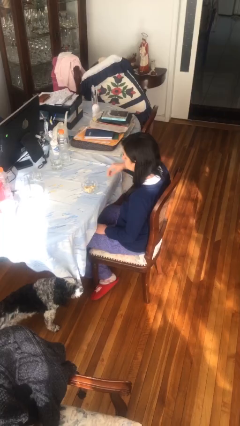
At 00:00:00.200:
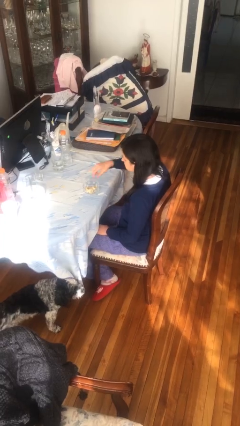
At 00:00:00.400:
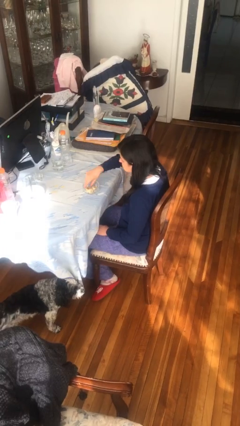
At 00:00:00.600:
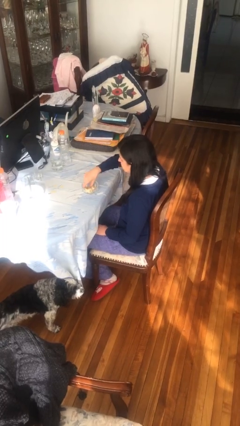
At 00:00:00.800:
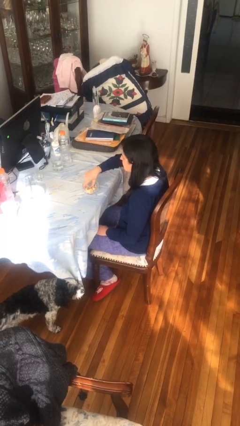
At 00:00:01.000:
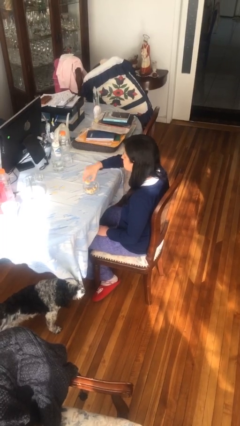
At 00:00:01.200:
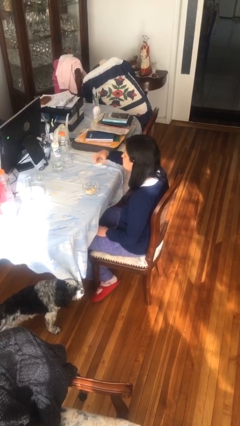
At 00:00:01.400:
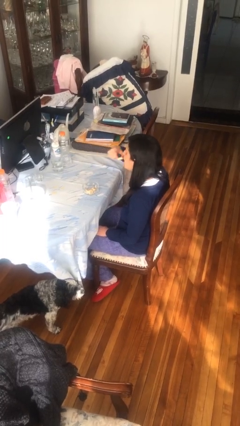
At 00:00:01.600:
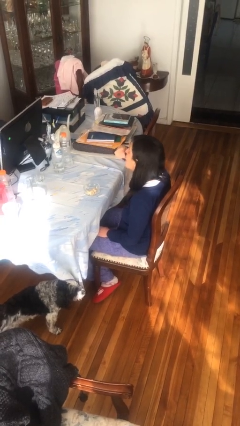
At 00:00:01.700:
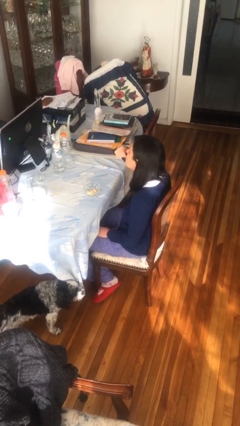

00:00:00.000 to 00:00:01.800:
person eats with hands

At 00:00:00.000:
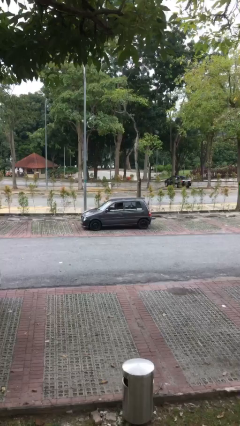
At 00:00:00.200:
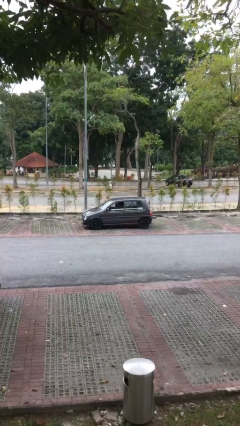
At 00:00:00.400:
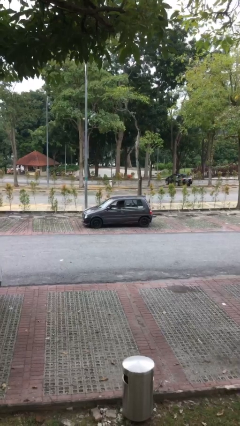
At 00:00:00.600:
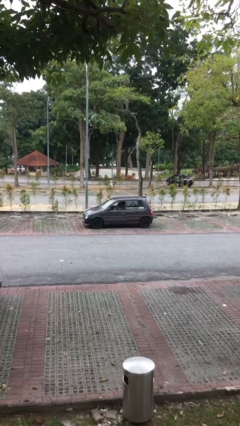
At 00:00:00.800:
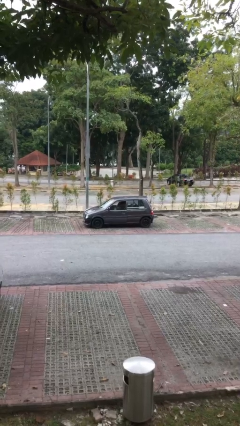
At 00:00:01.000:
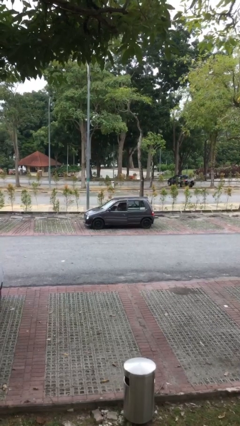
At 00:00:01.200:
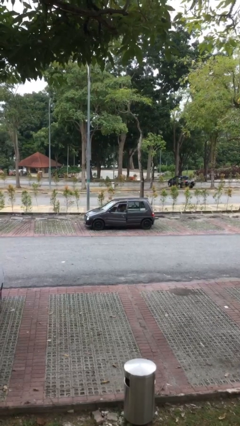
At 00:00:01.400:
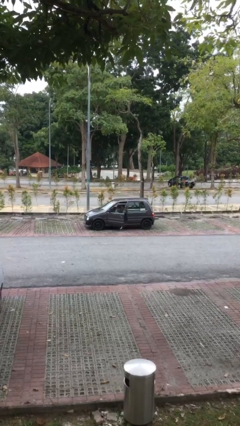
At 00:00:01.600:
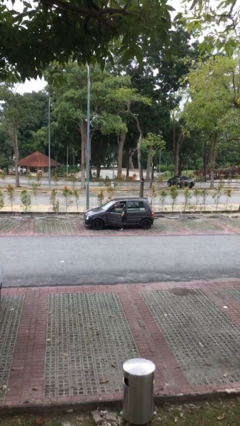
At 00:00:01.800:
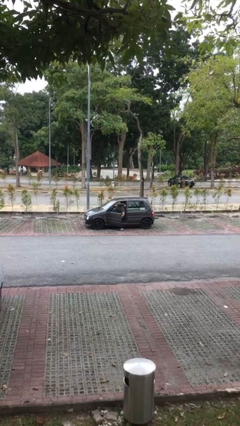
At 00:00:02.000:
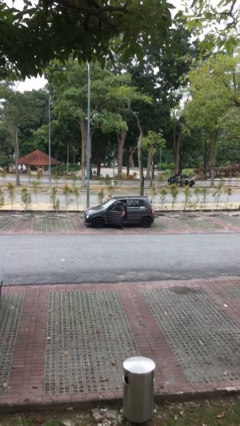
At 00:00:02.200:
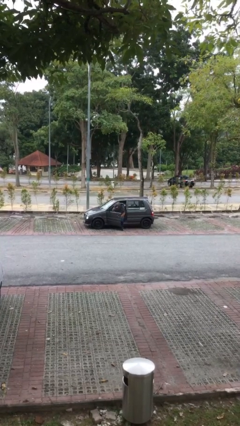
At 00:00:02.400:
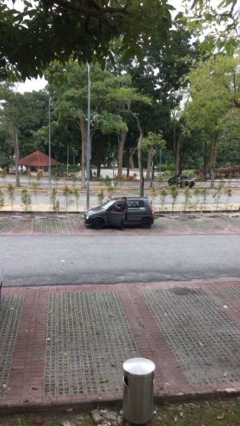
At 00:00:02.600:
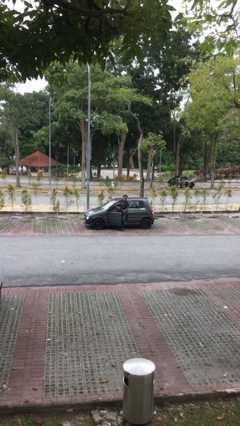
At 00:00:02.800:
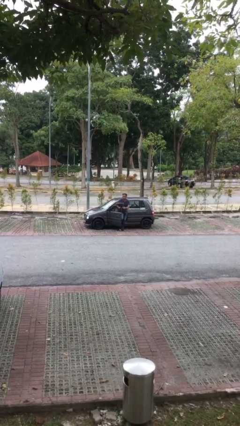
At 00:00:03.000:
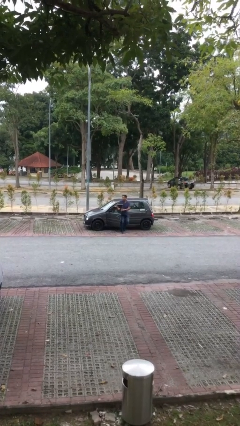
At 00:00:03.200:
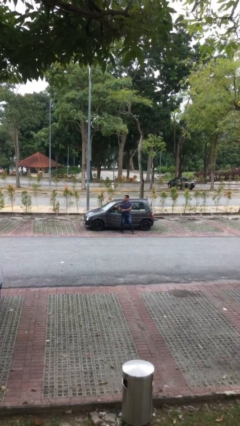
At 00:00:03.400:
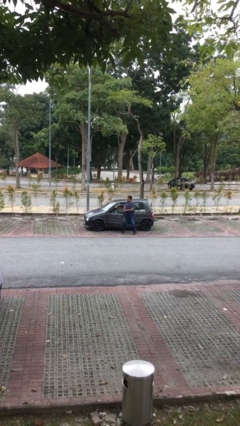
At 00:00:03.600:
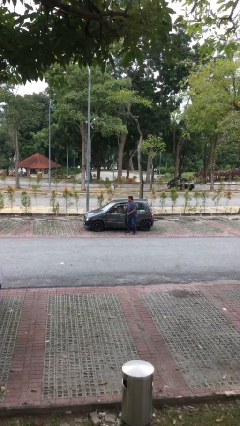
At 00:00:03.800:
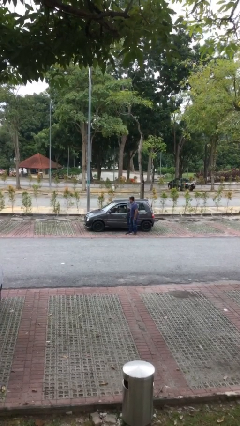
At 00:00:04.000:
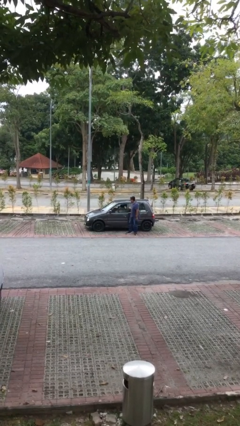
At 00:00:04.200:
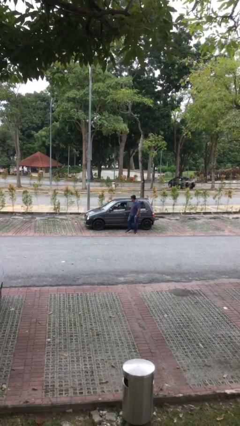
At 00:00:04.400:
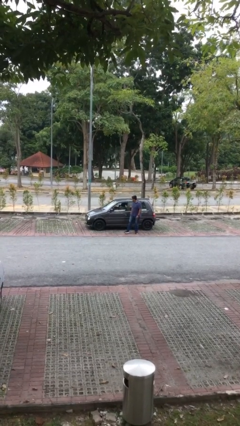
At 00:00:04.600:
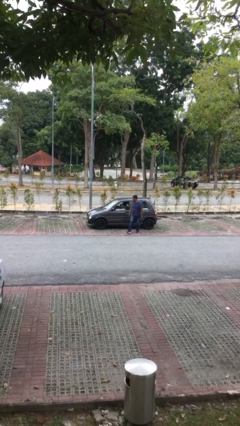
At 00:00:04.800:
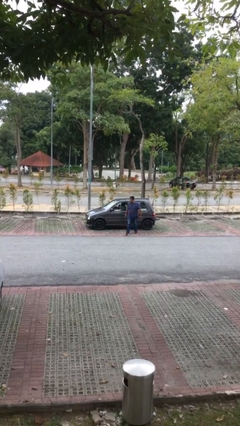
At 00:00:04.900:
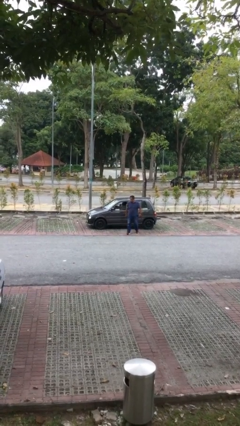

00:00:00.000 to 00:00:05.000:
car drops off person

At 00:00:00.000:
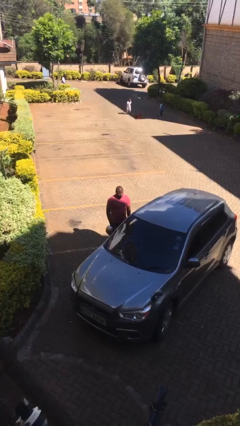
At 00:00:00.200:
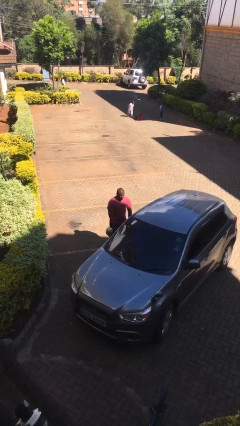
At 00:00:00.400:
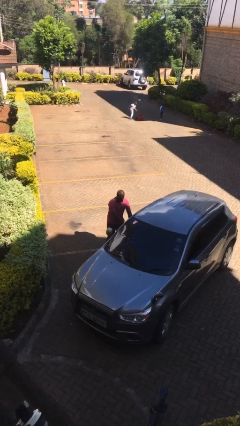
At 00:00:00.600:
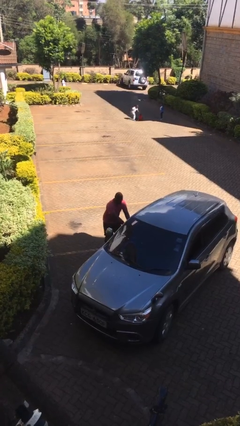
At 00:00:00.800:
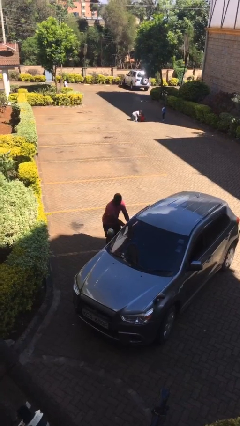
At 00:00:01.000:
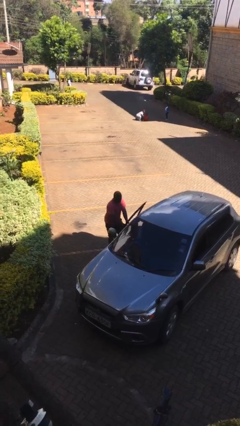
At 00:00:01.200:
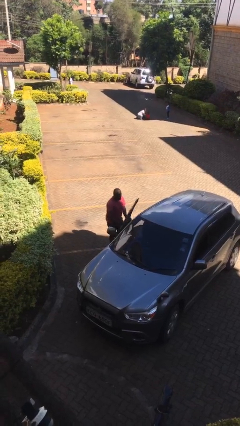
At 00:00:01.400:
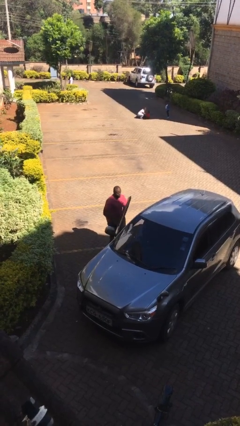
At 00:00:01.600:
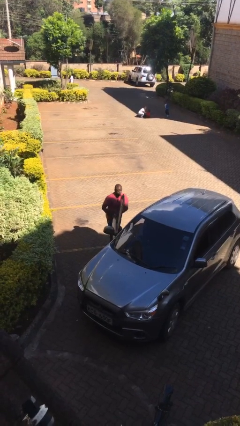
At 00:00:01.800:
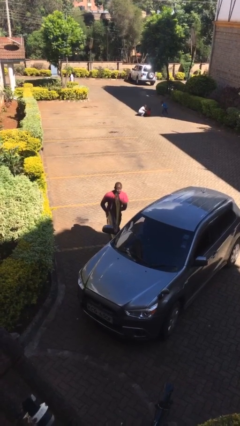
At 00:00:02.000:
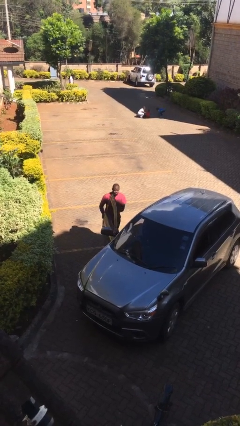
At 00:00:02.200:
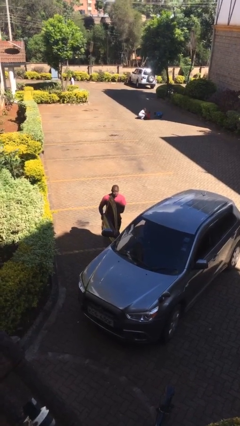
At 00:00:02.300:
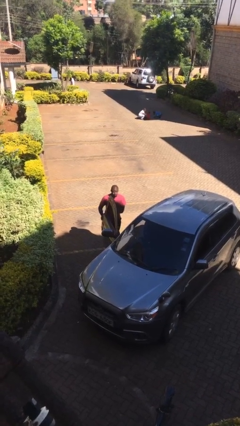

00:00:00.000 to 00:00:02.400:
person opens car door

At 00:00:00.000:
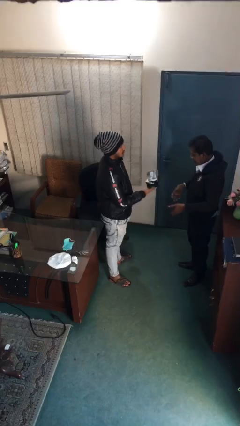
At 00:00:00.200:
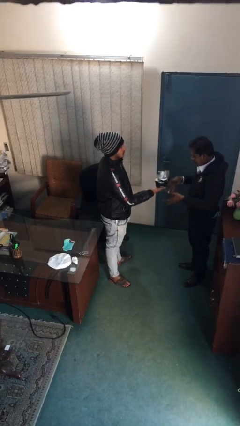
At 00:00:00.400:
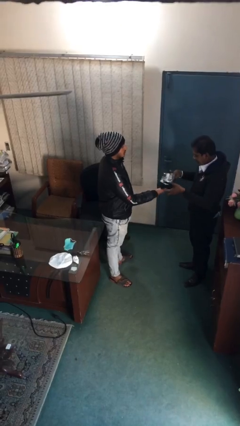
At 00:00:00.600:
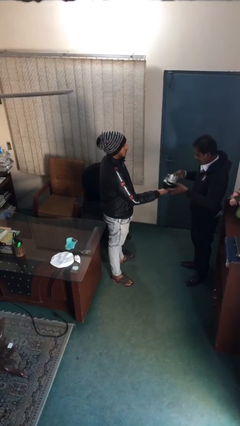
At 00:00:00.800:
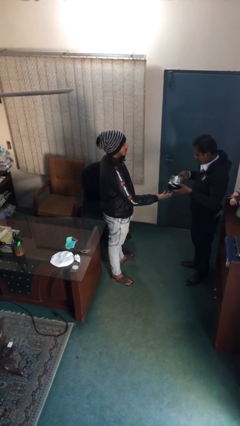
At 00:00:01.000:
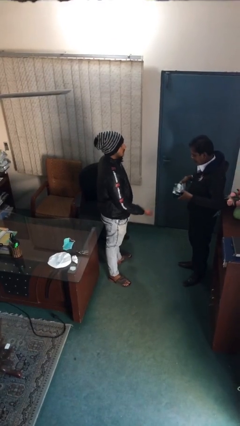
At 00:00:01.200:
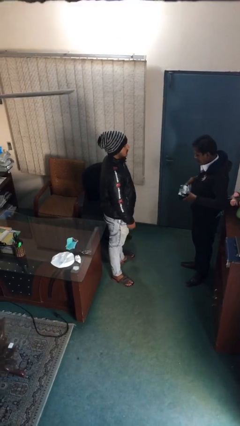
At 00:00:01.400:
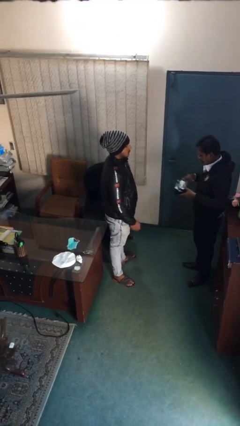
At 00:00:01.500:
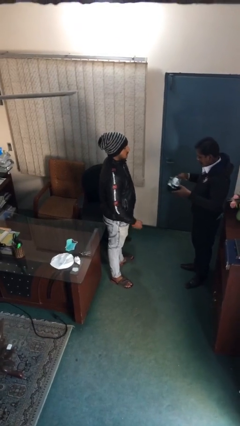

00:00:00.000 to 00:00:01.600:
person transfers object to person

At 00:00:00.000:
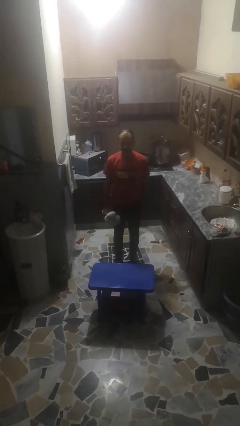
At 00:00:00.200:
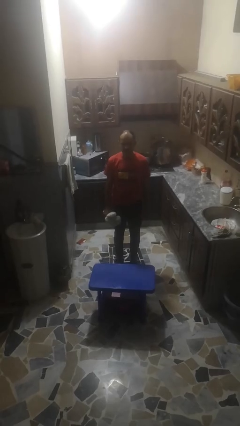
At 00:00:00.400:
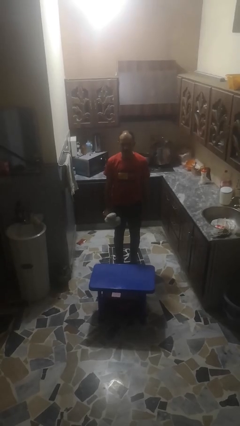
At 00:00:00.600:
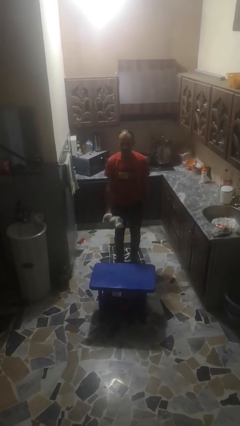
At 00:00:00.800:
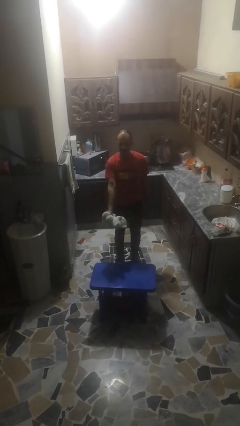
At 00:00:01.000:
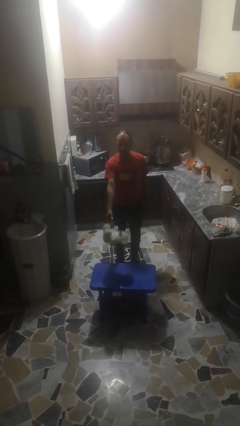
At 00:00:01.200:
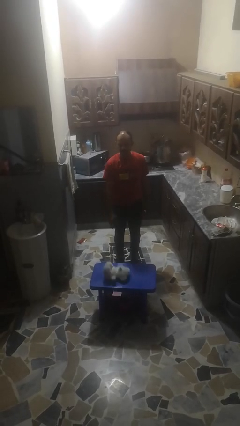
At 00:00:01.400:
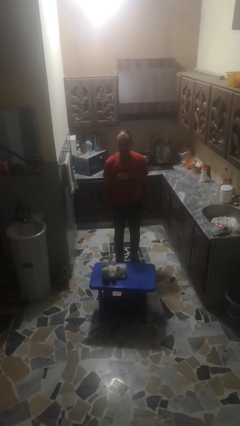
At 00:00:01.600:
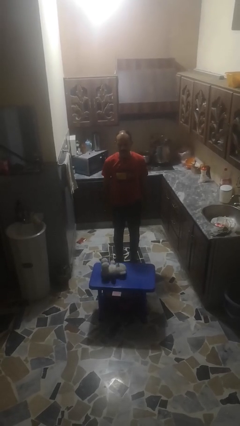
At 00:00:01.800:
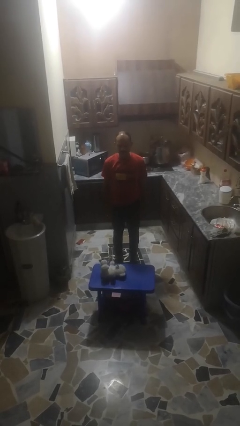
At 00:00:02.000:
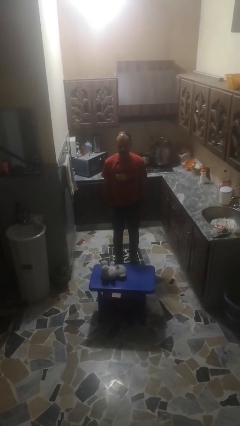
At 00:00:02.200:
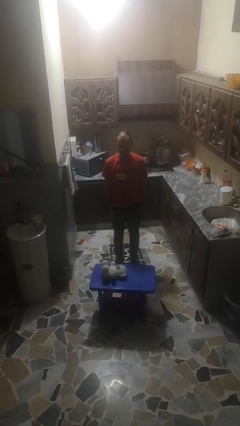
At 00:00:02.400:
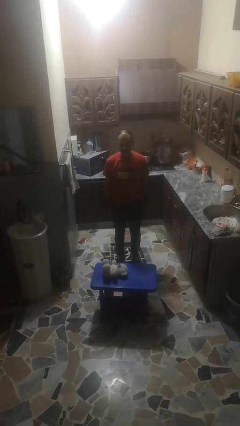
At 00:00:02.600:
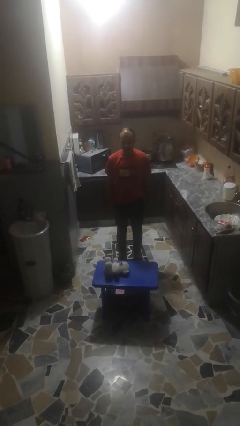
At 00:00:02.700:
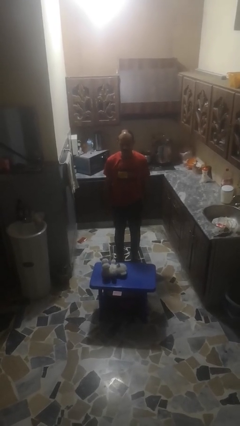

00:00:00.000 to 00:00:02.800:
person throws object to ground

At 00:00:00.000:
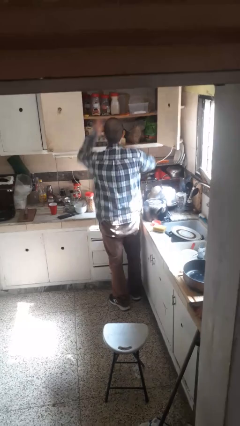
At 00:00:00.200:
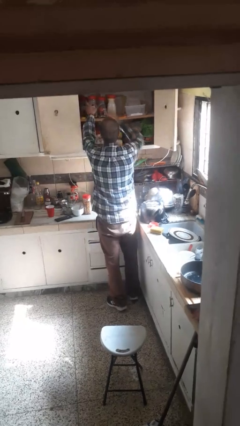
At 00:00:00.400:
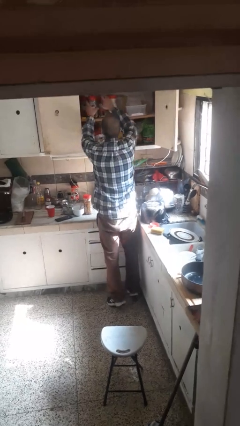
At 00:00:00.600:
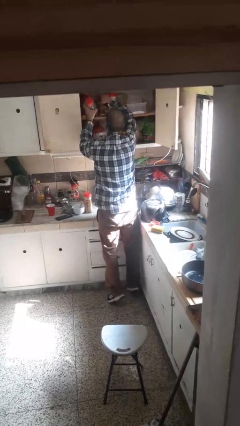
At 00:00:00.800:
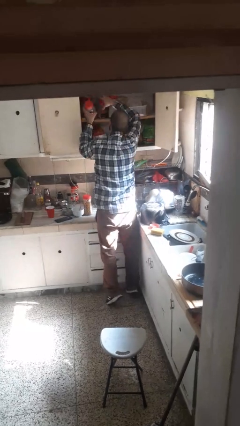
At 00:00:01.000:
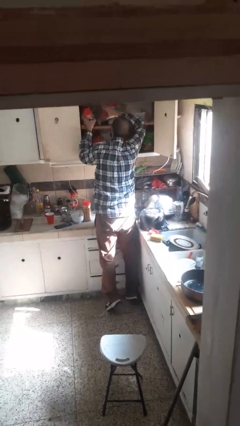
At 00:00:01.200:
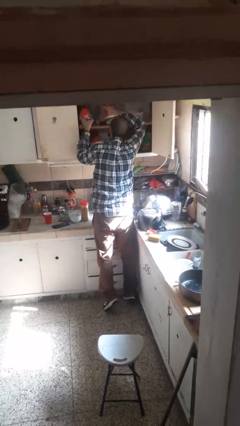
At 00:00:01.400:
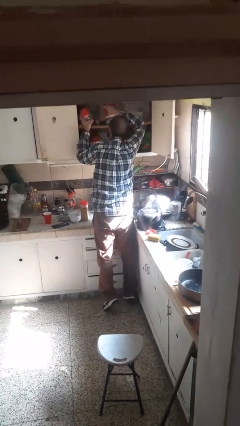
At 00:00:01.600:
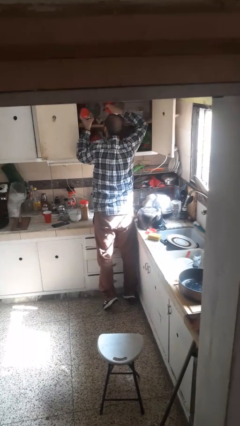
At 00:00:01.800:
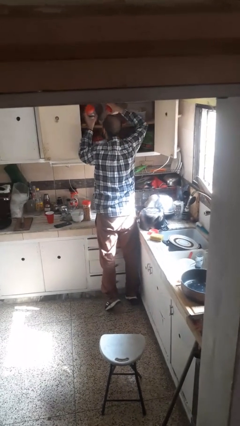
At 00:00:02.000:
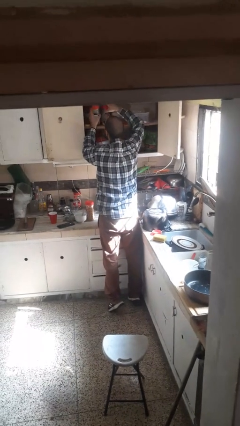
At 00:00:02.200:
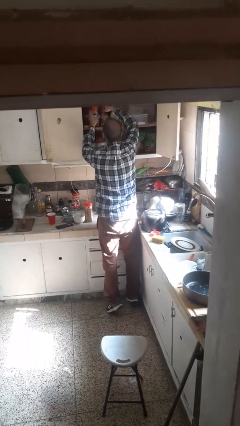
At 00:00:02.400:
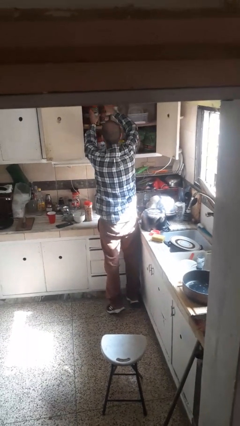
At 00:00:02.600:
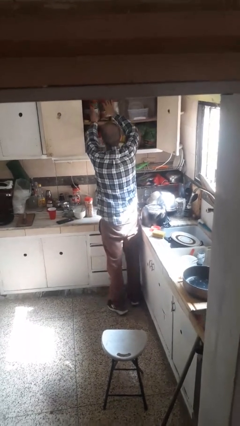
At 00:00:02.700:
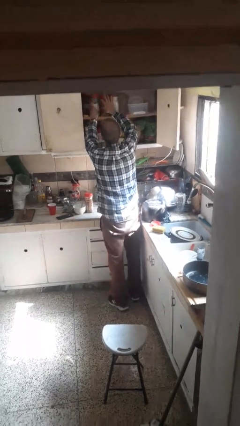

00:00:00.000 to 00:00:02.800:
person searches in cabinet

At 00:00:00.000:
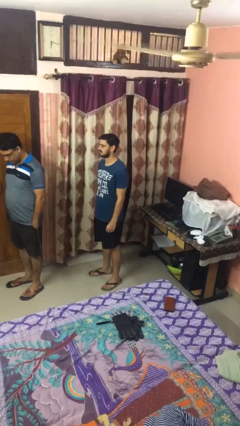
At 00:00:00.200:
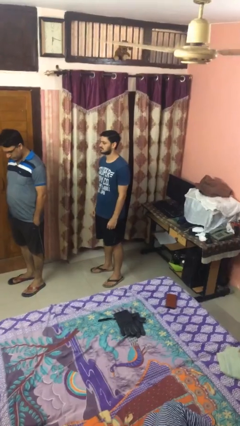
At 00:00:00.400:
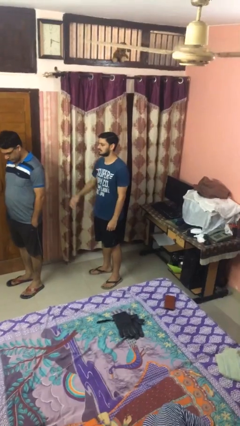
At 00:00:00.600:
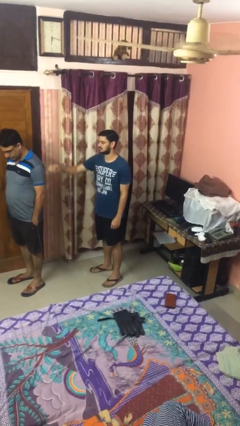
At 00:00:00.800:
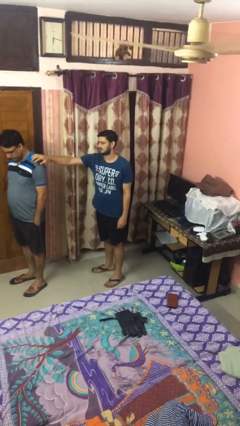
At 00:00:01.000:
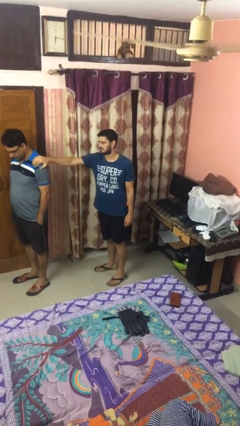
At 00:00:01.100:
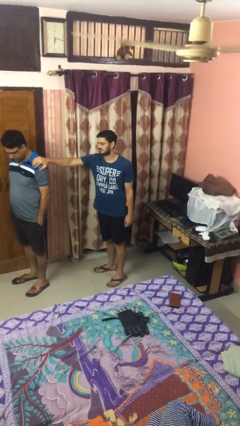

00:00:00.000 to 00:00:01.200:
person grabs person by shoulder
